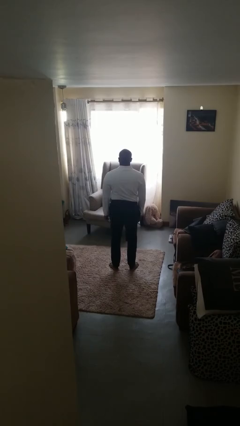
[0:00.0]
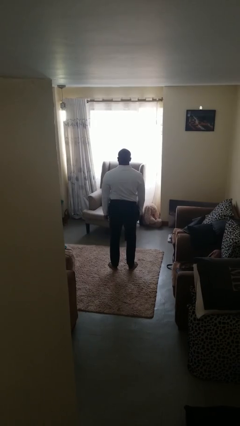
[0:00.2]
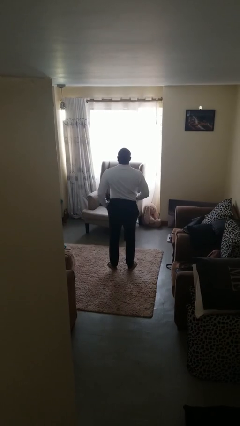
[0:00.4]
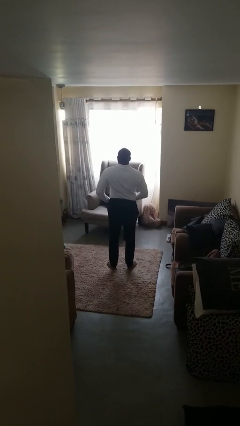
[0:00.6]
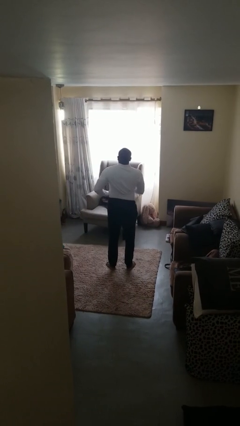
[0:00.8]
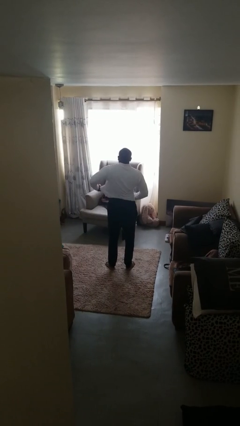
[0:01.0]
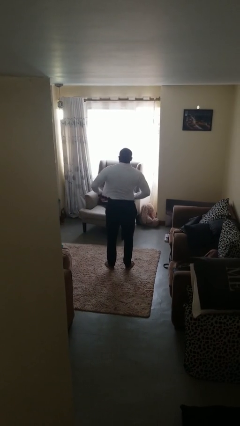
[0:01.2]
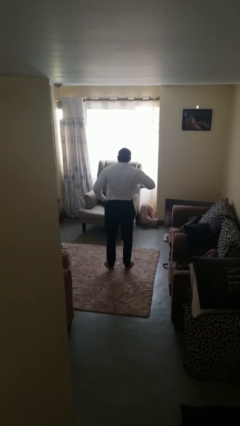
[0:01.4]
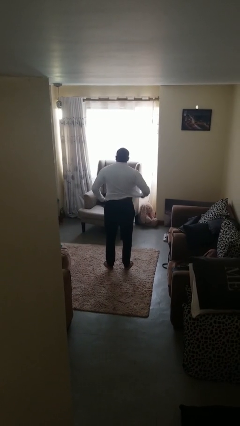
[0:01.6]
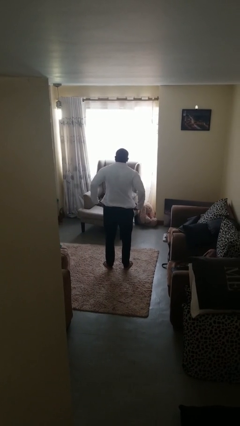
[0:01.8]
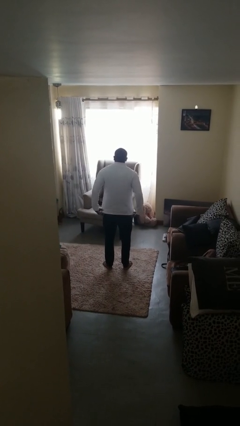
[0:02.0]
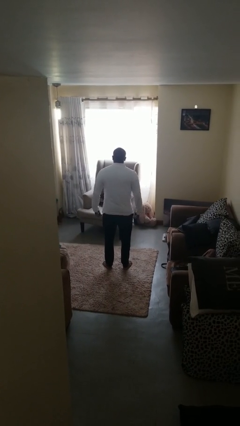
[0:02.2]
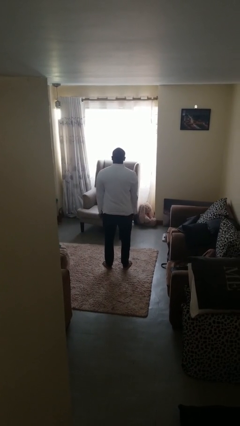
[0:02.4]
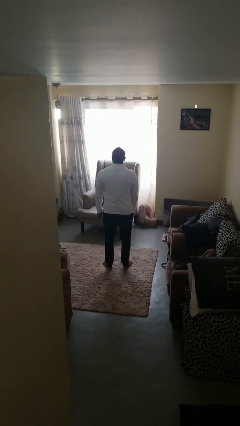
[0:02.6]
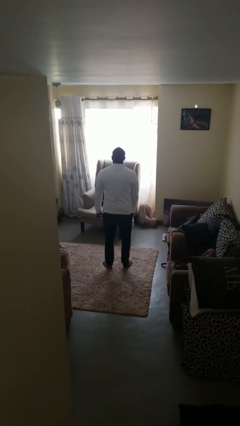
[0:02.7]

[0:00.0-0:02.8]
person untucks shirt

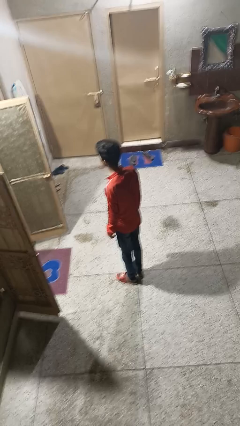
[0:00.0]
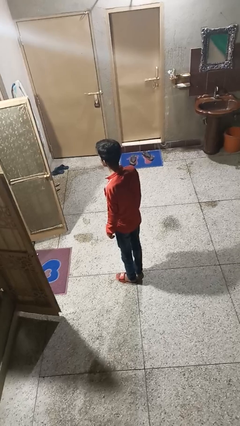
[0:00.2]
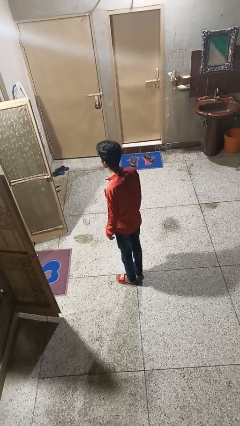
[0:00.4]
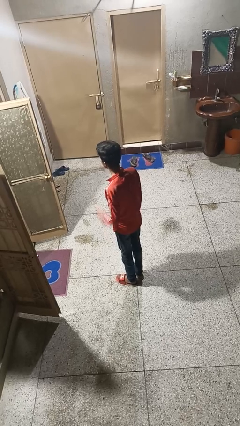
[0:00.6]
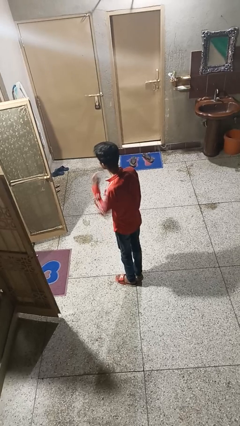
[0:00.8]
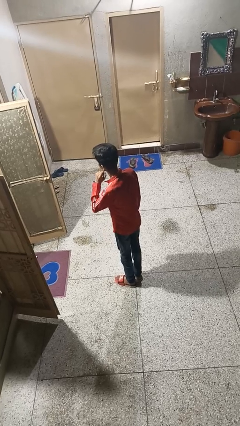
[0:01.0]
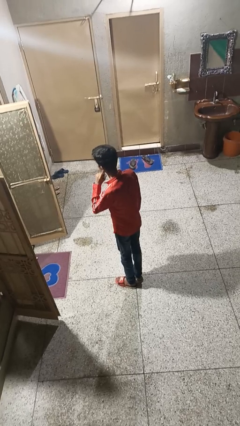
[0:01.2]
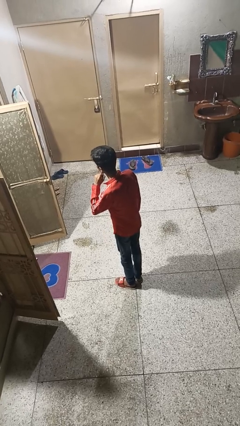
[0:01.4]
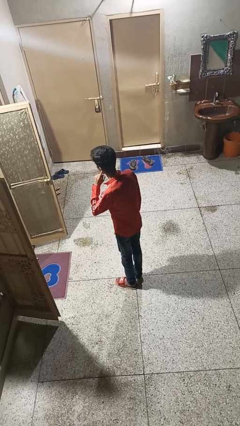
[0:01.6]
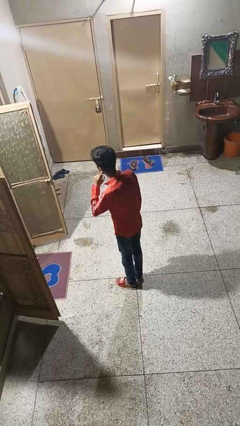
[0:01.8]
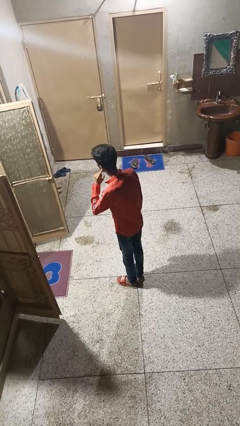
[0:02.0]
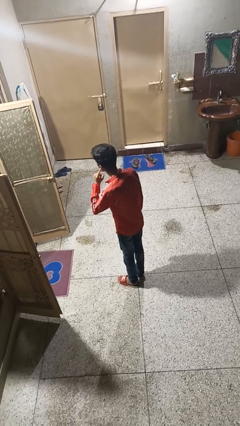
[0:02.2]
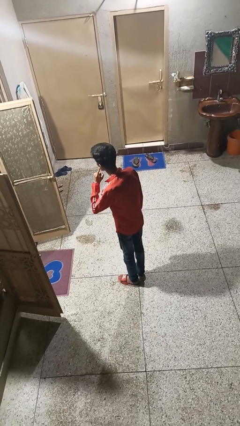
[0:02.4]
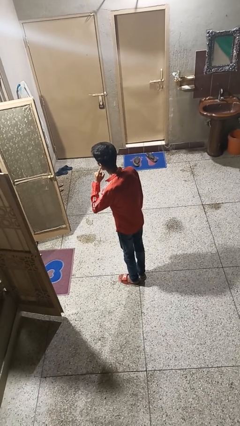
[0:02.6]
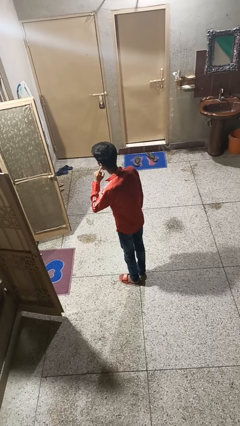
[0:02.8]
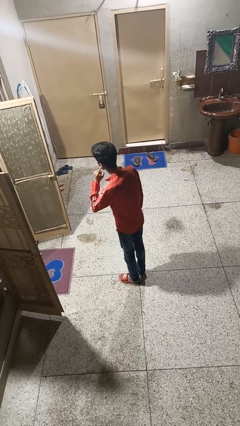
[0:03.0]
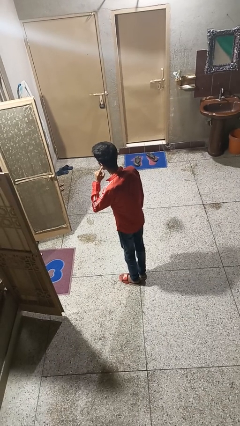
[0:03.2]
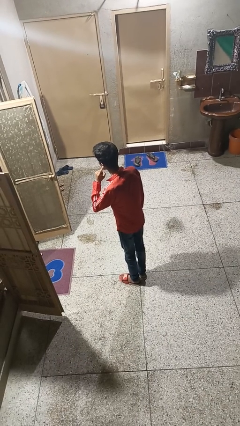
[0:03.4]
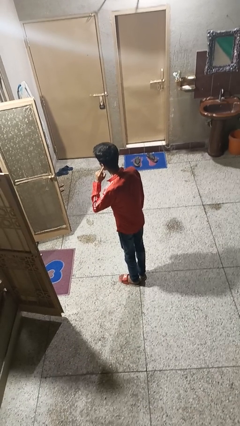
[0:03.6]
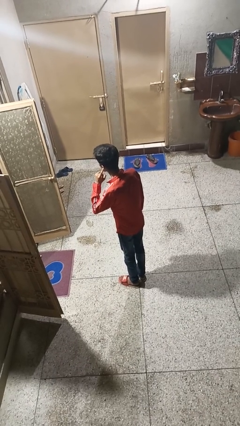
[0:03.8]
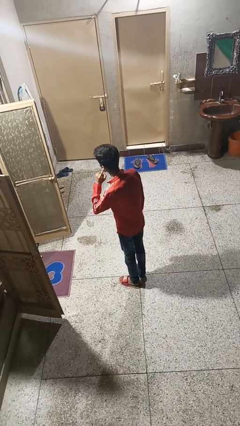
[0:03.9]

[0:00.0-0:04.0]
person gestures listen closely

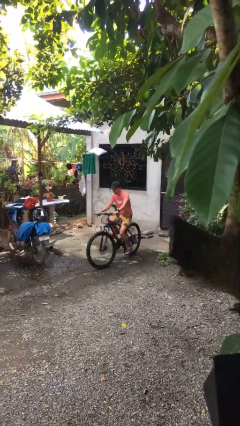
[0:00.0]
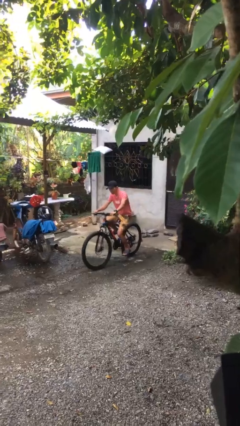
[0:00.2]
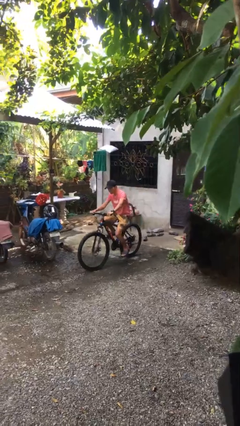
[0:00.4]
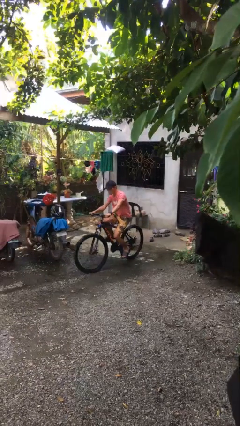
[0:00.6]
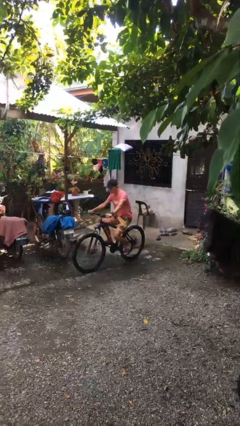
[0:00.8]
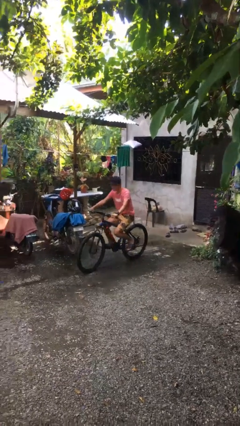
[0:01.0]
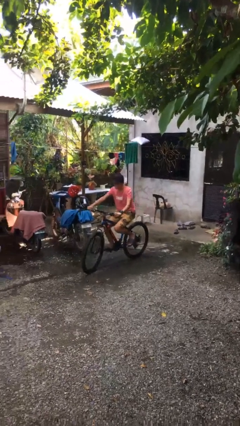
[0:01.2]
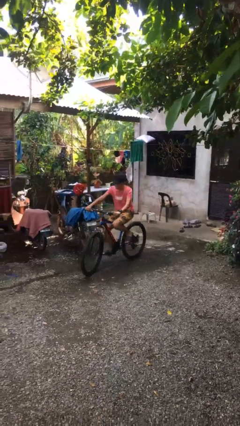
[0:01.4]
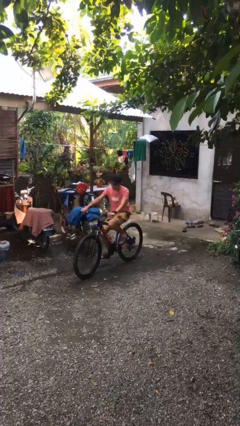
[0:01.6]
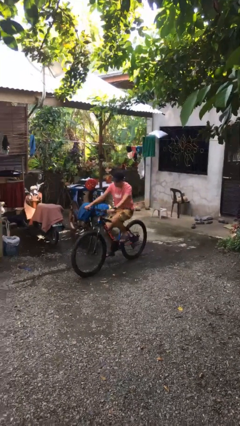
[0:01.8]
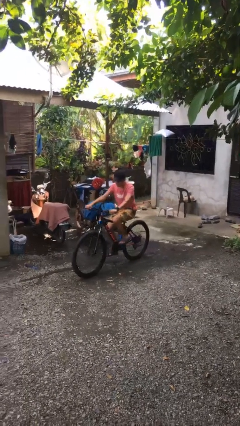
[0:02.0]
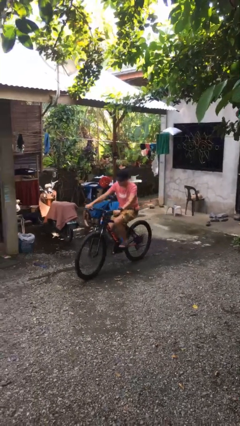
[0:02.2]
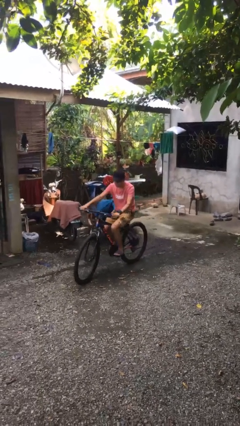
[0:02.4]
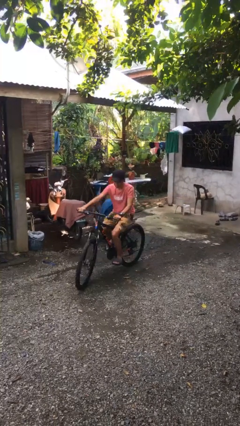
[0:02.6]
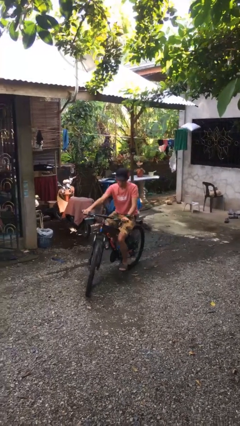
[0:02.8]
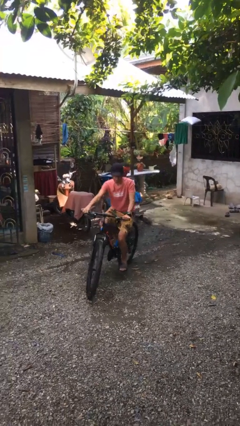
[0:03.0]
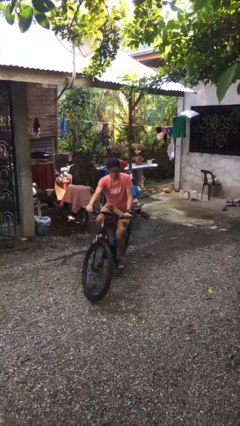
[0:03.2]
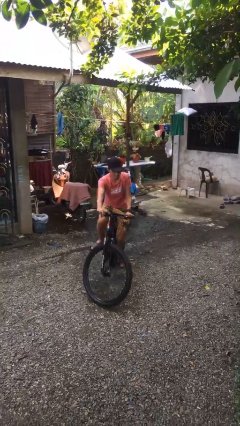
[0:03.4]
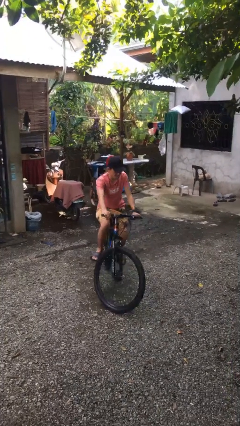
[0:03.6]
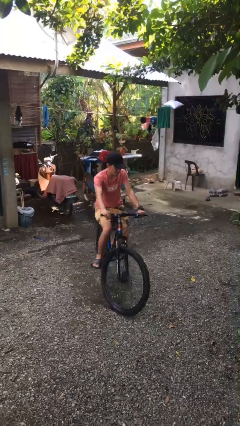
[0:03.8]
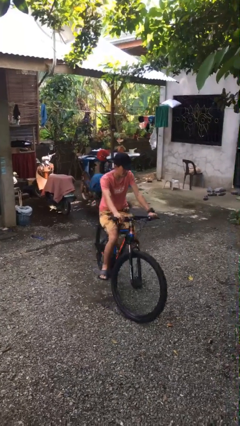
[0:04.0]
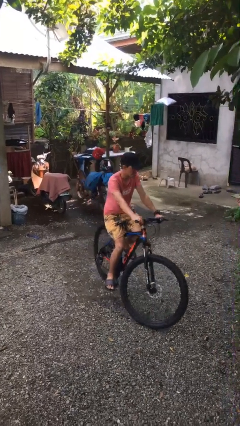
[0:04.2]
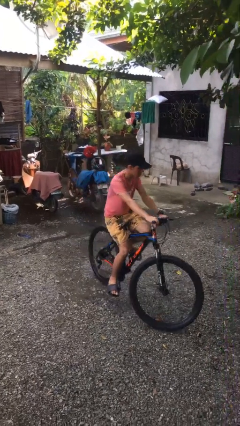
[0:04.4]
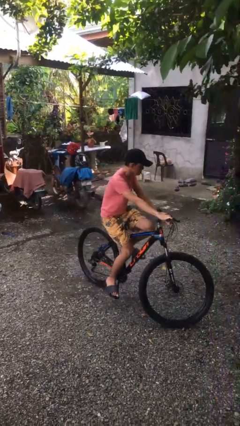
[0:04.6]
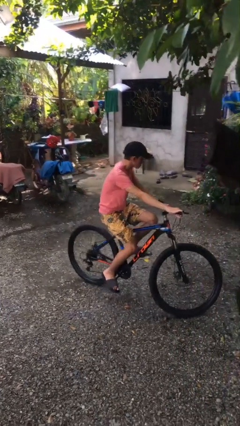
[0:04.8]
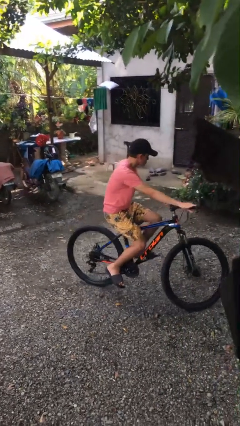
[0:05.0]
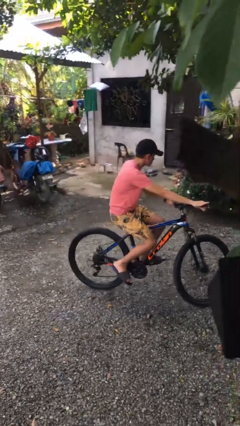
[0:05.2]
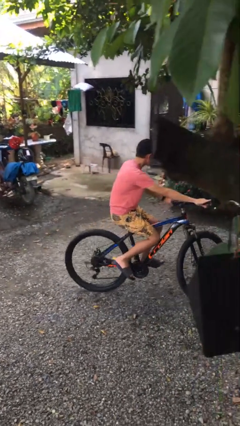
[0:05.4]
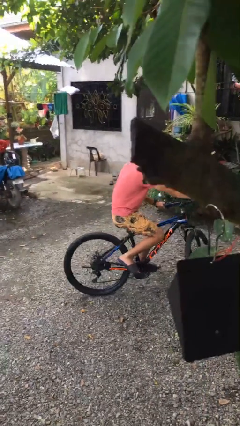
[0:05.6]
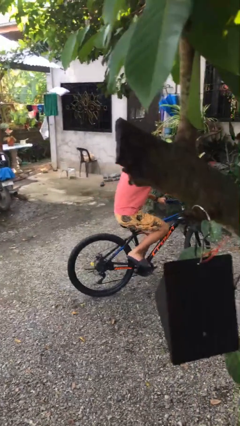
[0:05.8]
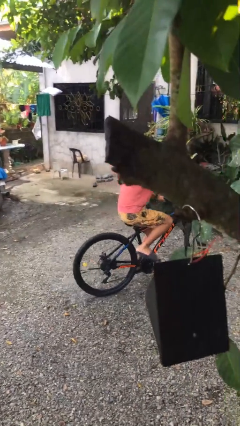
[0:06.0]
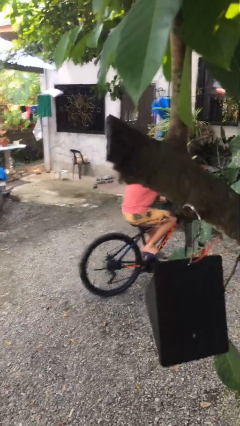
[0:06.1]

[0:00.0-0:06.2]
person rides bicycle

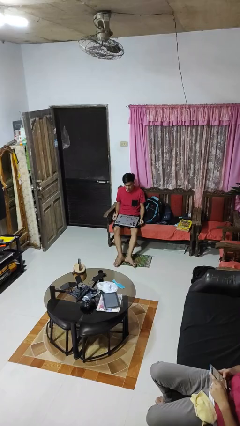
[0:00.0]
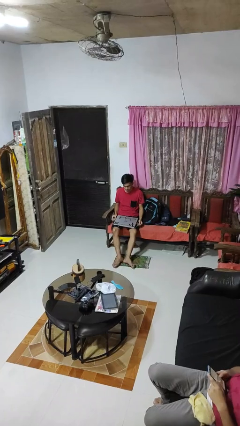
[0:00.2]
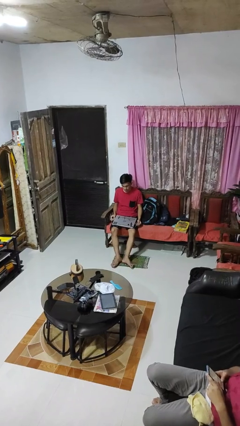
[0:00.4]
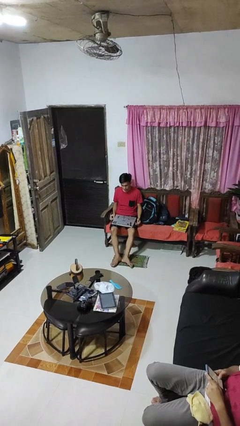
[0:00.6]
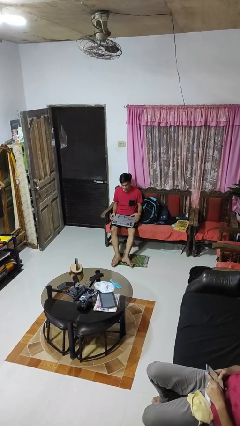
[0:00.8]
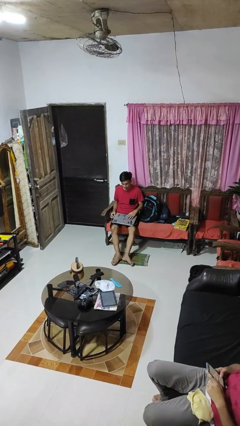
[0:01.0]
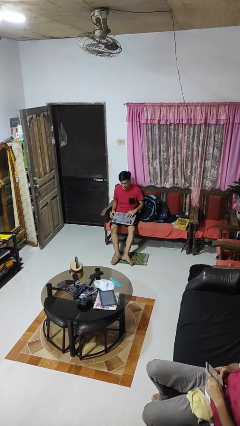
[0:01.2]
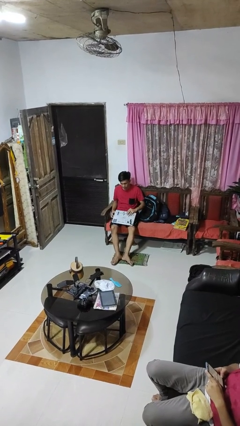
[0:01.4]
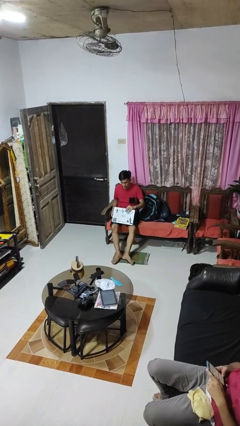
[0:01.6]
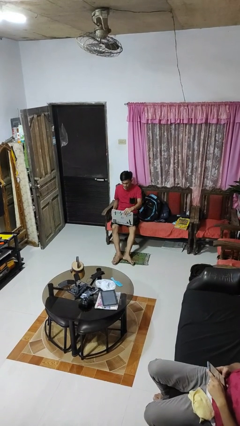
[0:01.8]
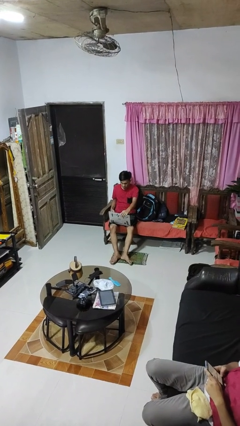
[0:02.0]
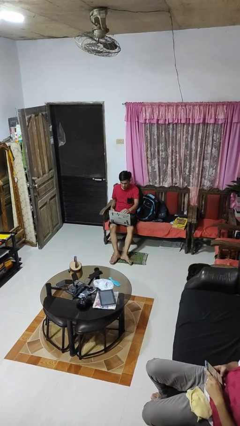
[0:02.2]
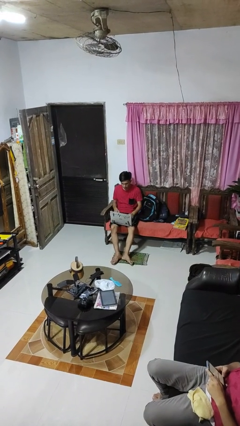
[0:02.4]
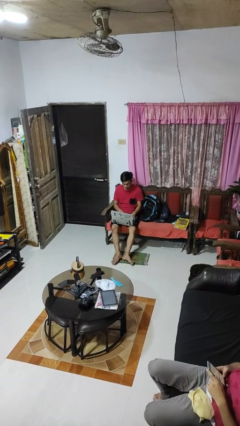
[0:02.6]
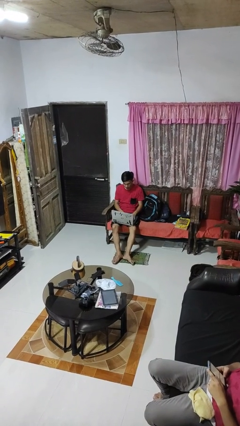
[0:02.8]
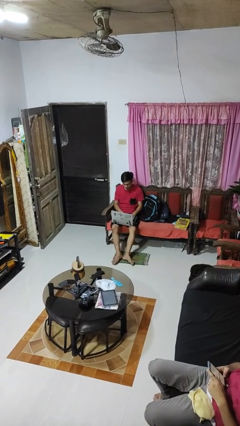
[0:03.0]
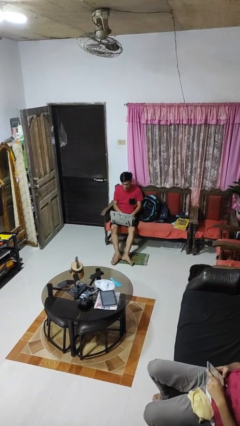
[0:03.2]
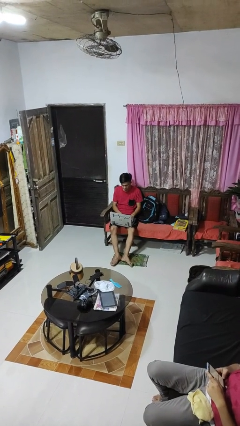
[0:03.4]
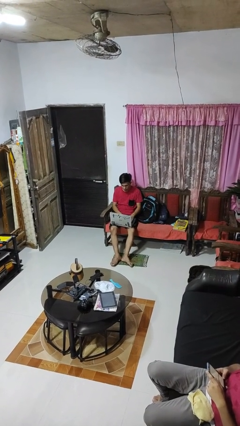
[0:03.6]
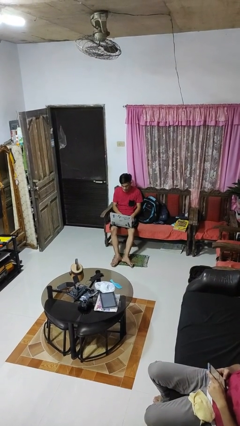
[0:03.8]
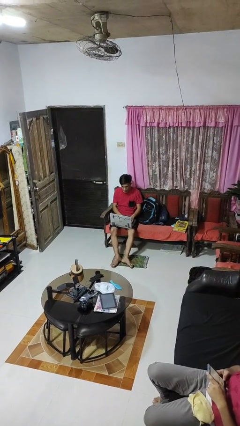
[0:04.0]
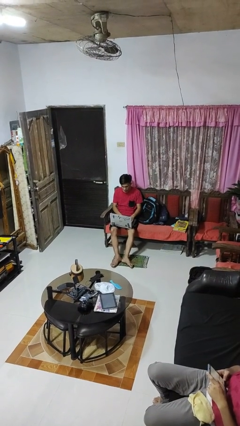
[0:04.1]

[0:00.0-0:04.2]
person opens laptop

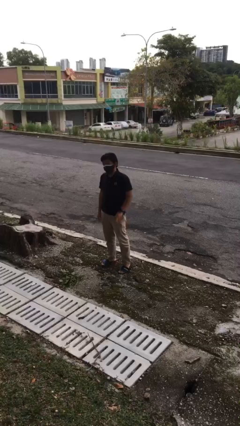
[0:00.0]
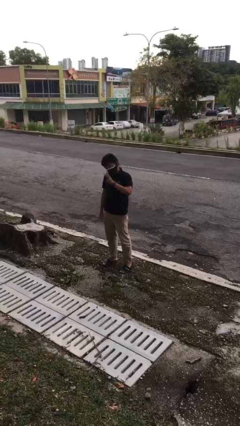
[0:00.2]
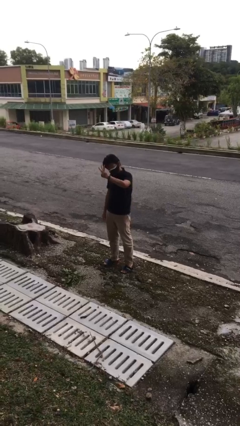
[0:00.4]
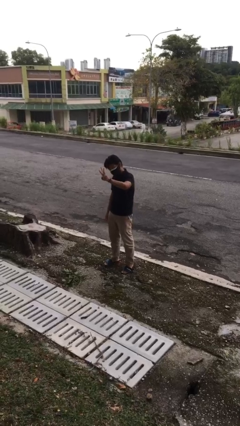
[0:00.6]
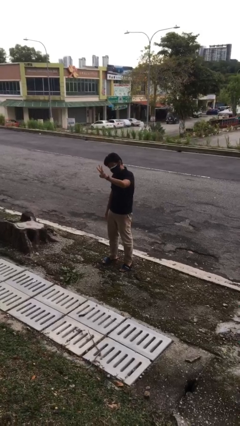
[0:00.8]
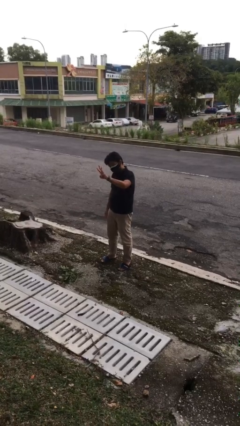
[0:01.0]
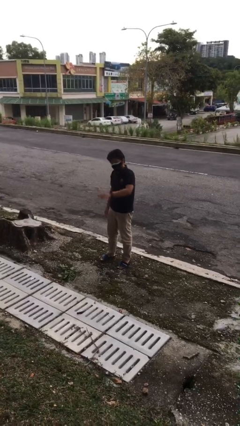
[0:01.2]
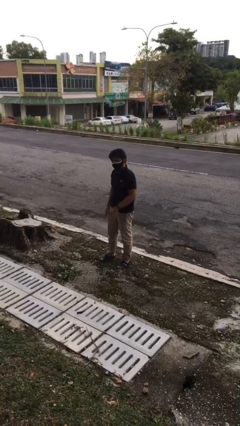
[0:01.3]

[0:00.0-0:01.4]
person gestures number three
